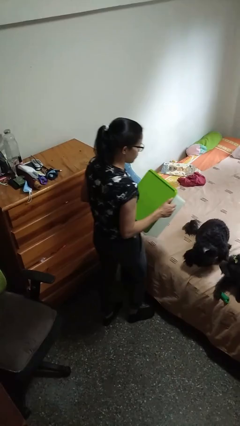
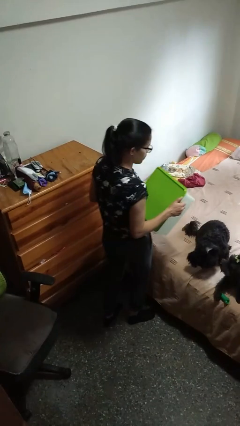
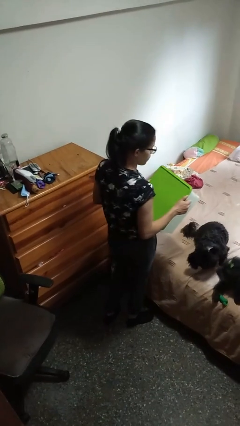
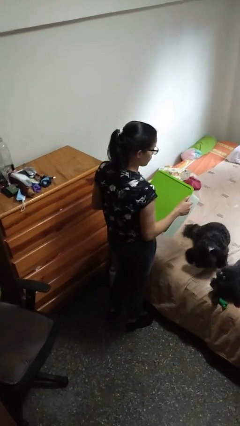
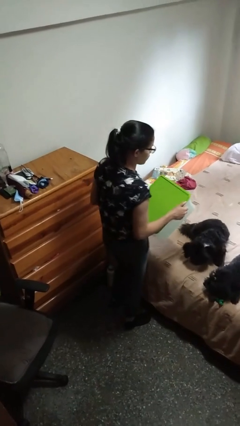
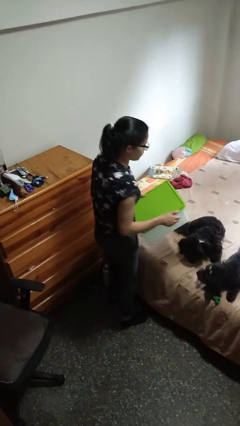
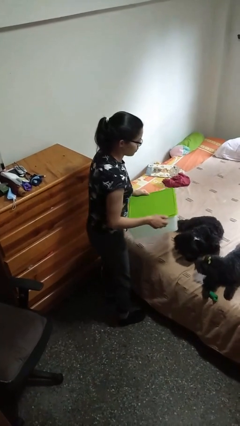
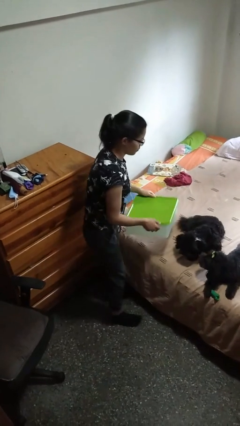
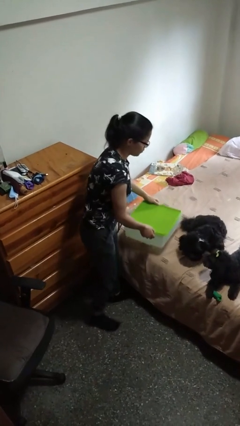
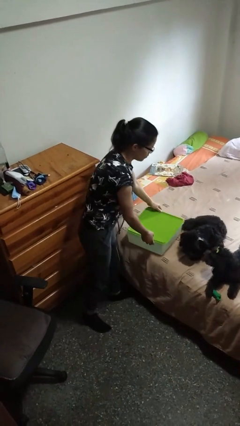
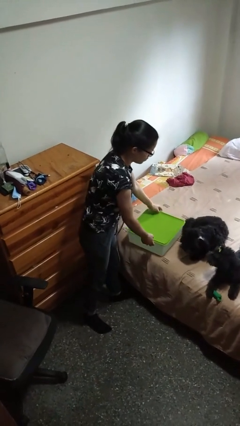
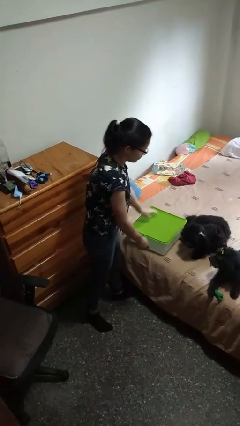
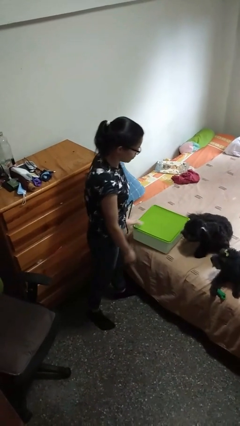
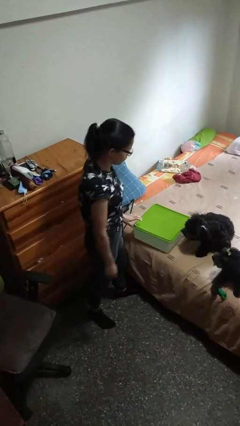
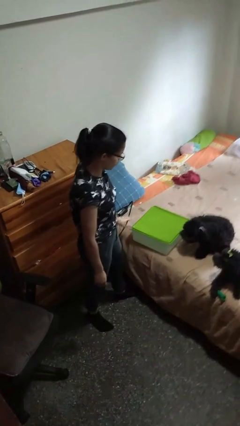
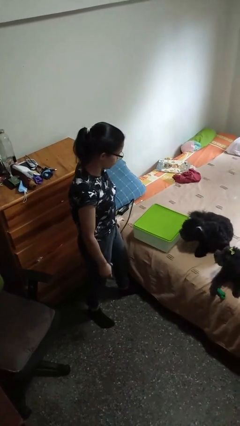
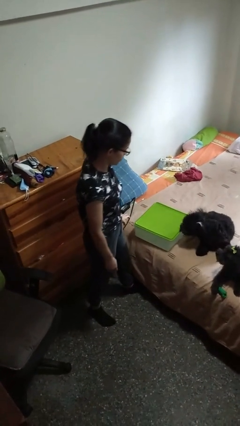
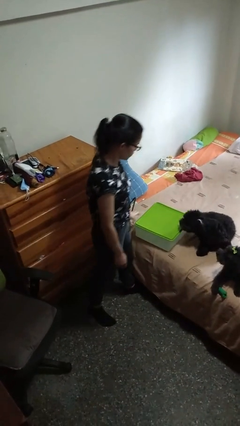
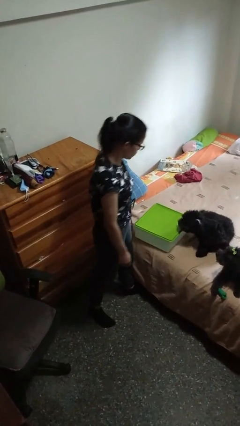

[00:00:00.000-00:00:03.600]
person puts down object on bed

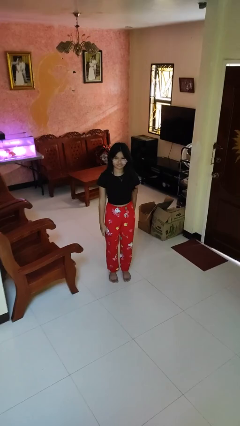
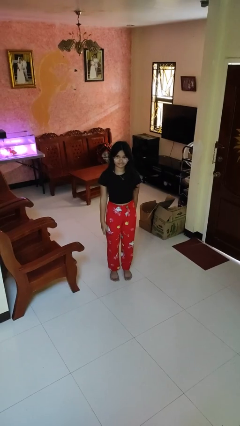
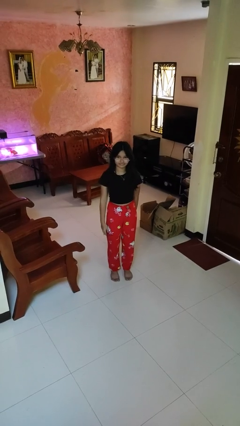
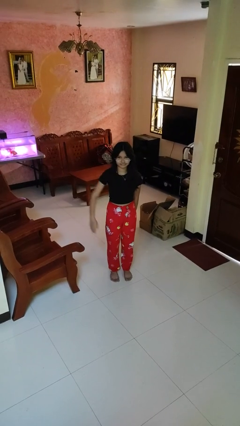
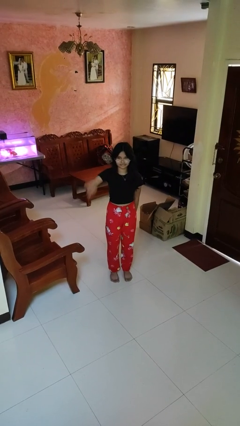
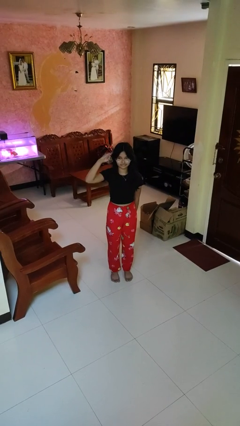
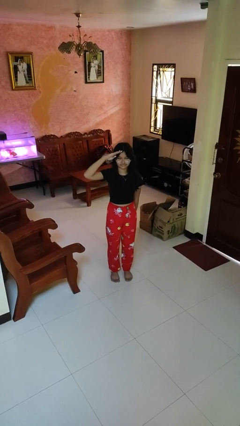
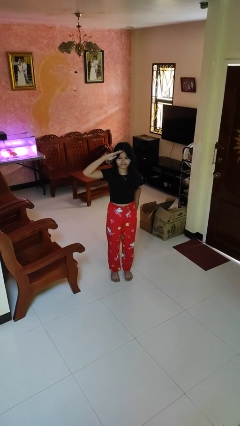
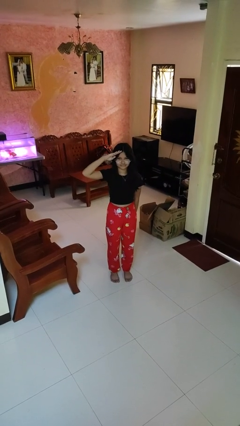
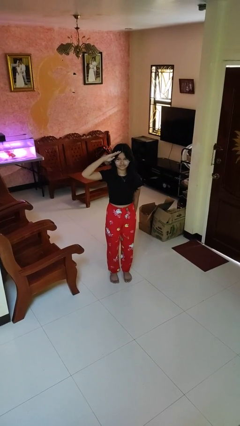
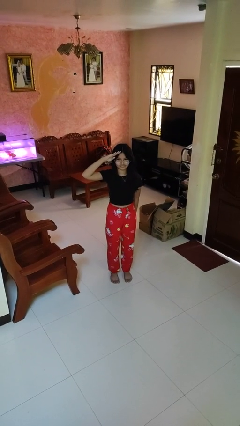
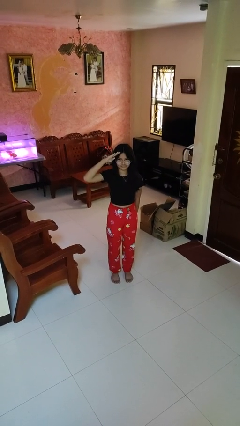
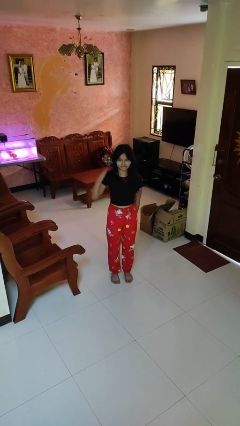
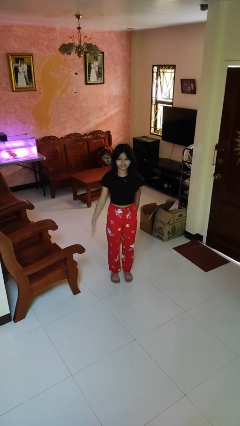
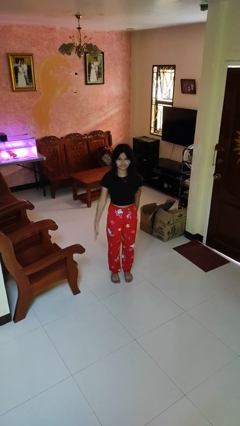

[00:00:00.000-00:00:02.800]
person salutes

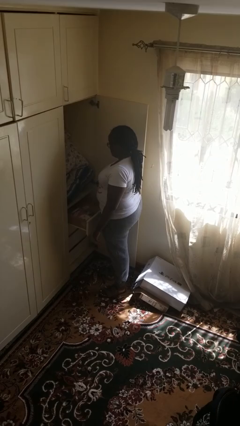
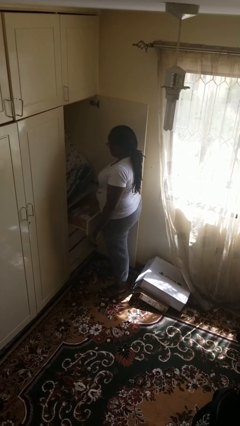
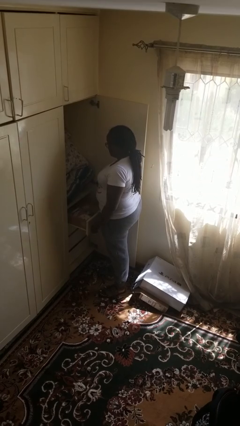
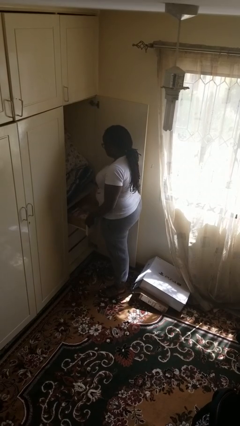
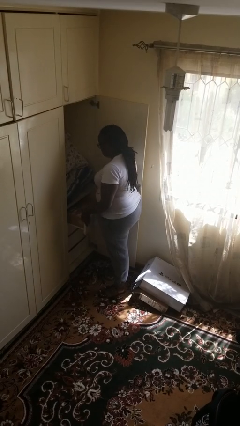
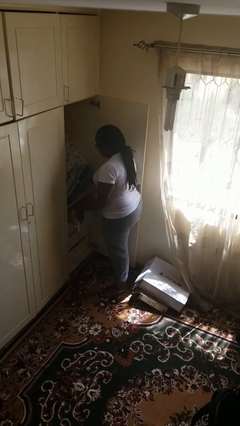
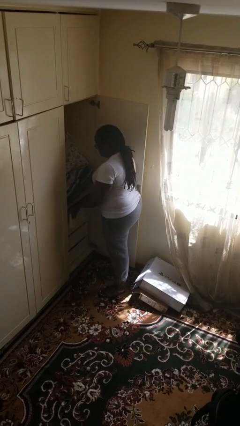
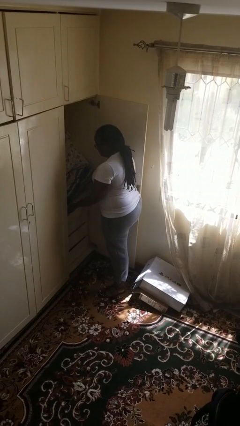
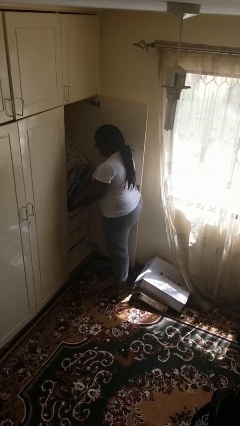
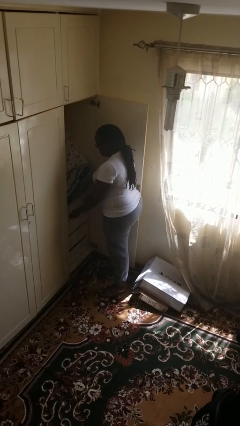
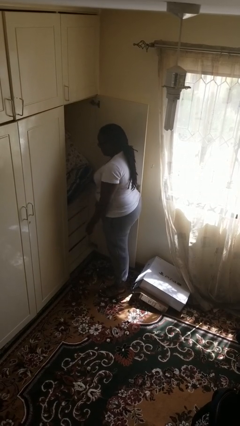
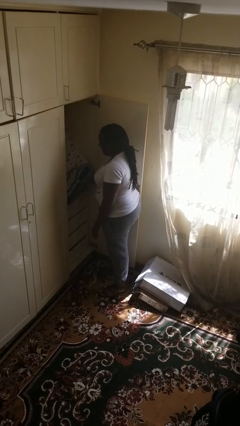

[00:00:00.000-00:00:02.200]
person closes dresser drawer

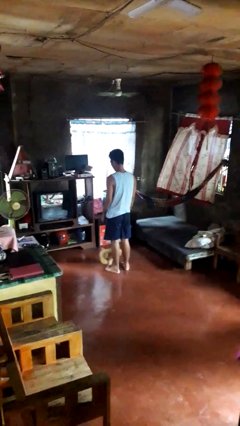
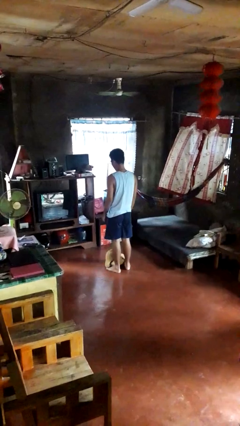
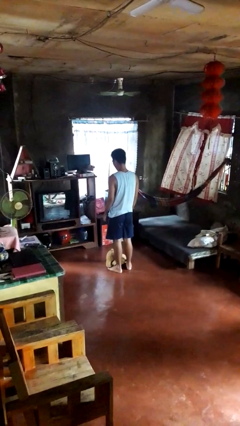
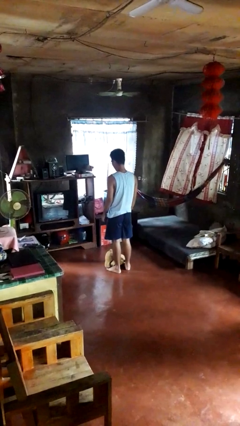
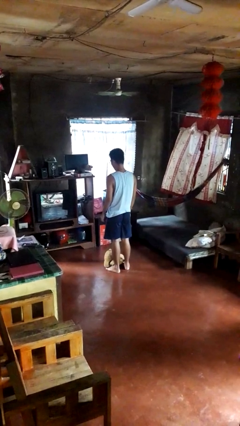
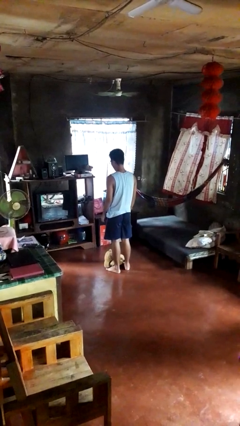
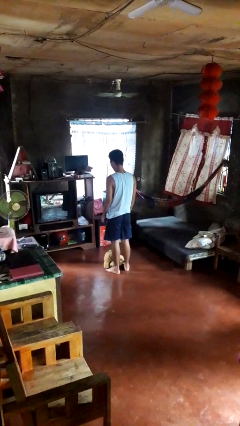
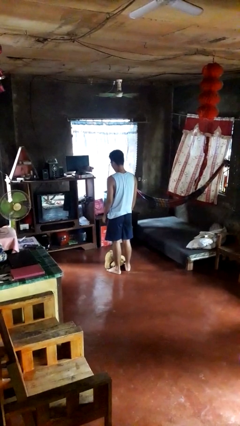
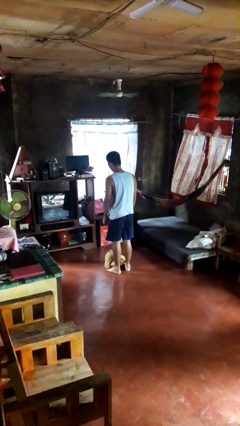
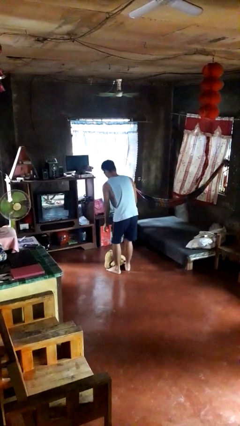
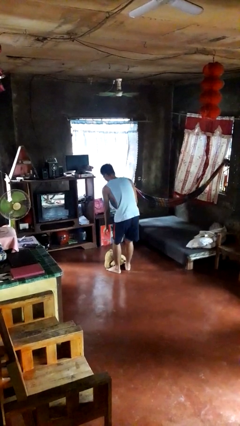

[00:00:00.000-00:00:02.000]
person drops object

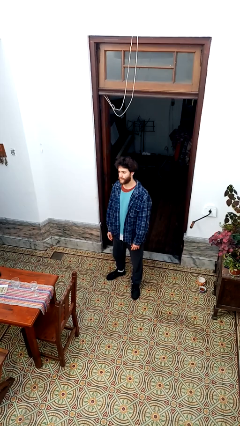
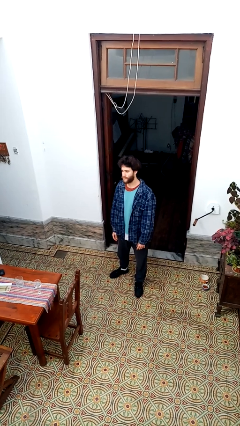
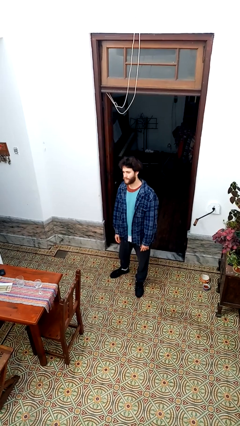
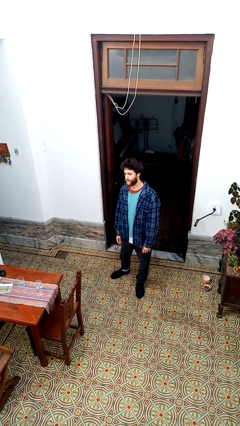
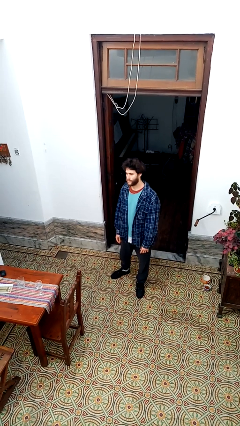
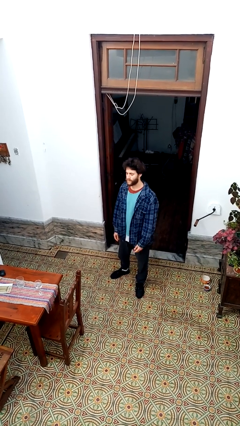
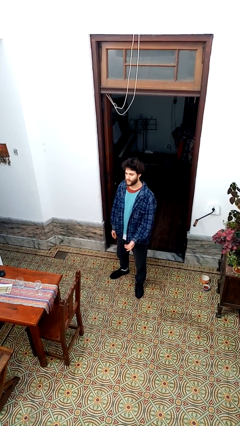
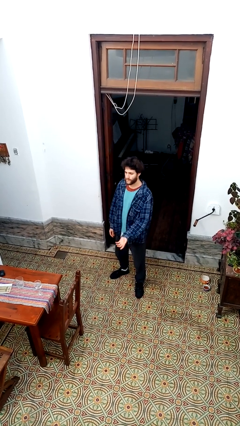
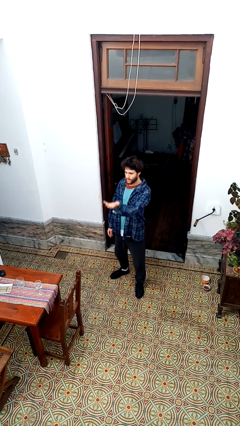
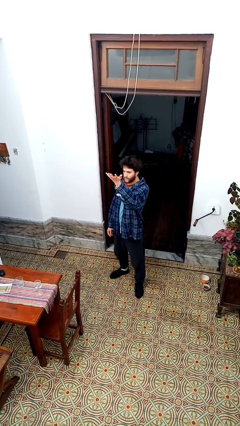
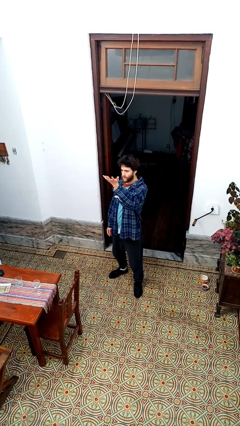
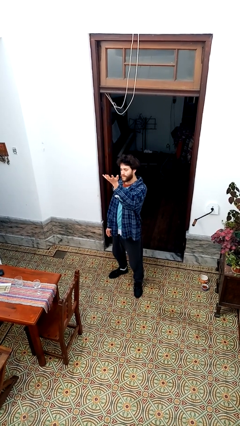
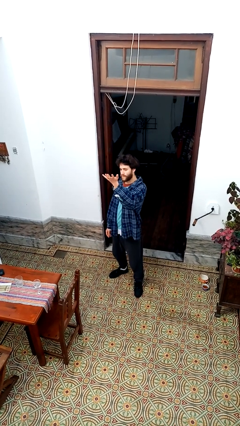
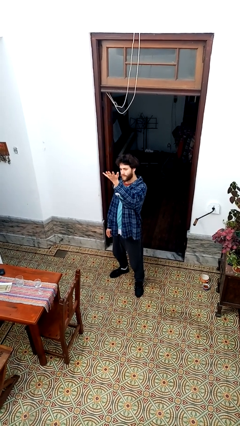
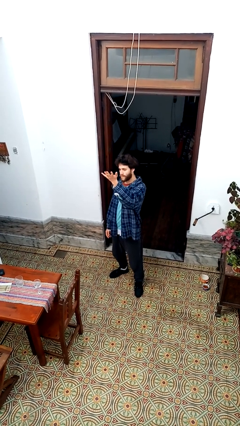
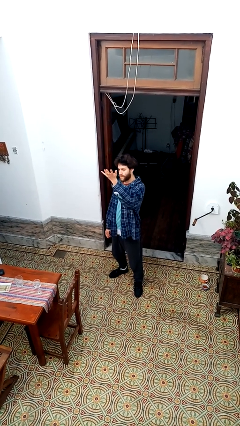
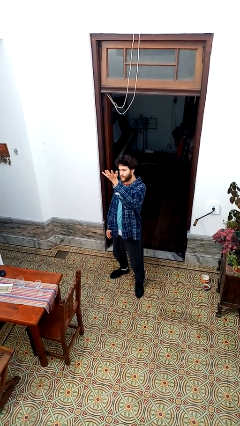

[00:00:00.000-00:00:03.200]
person gestures swipe up

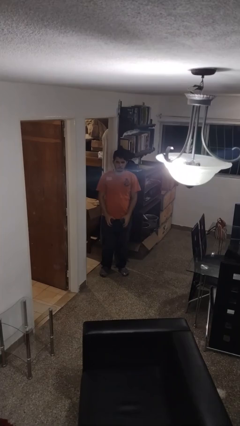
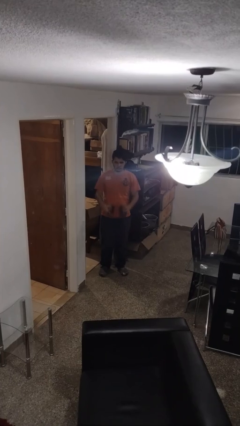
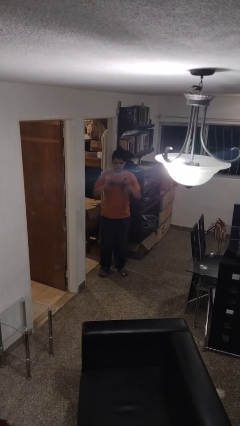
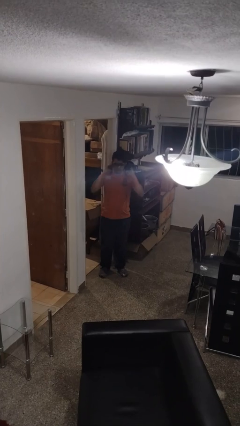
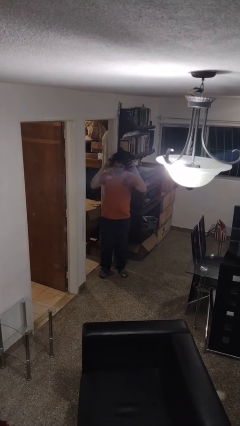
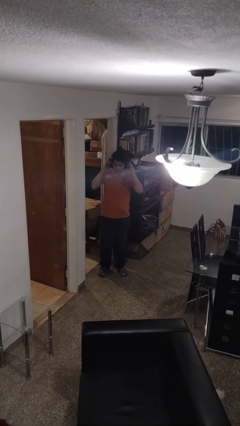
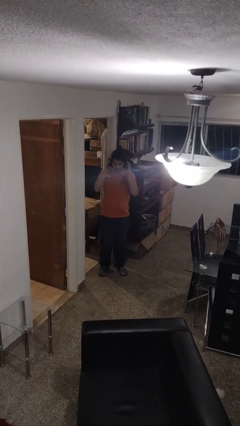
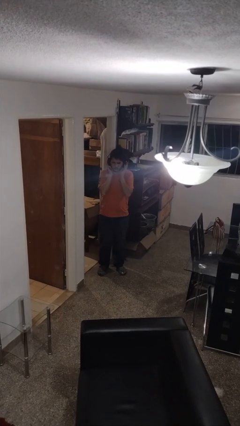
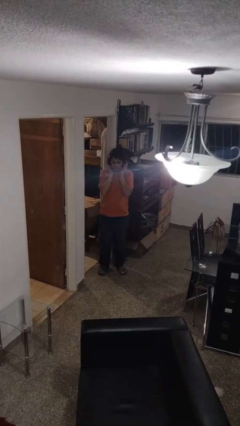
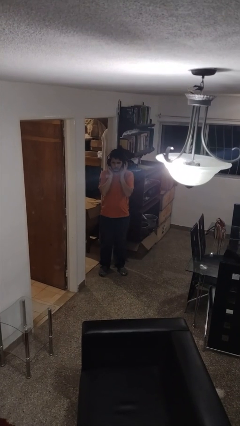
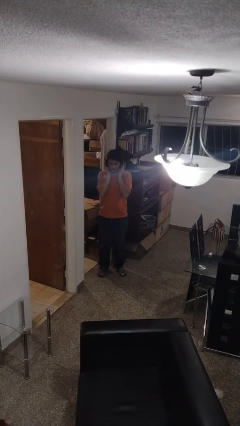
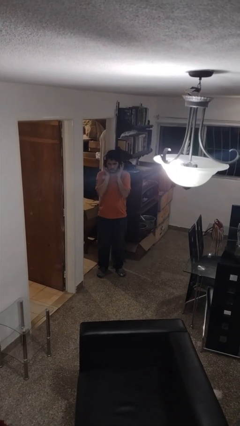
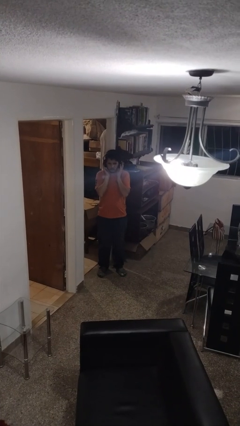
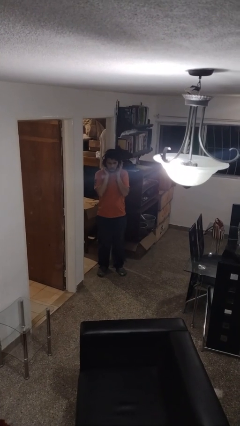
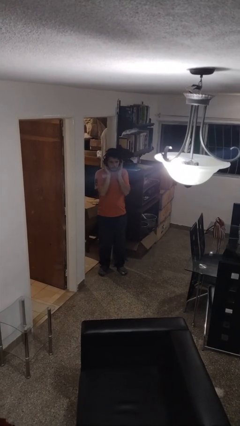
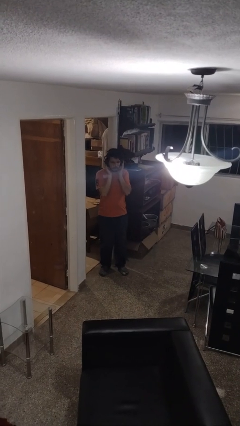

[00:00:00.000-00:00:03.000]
person puts on headphones

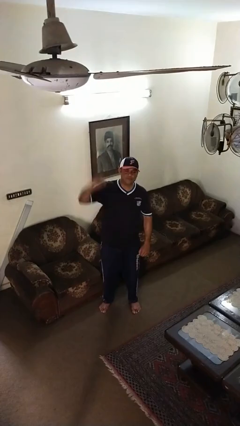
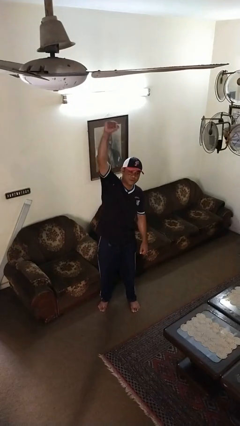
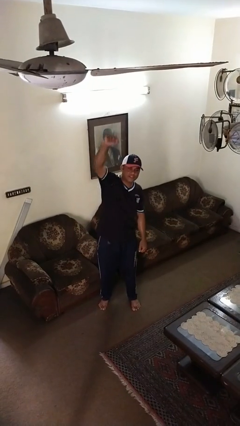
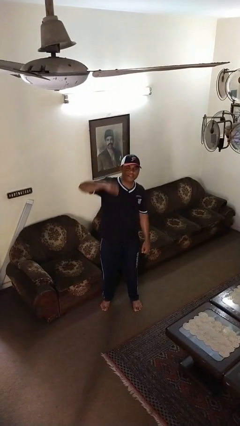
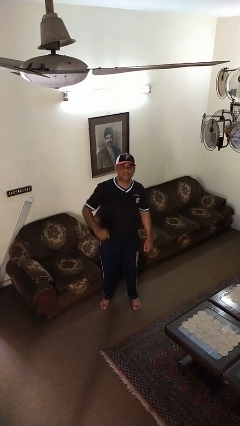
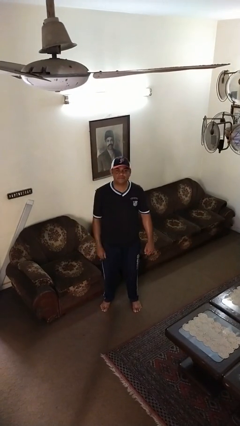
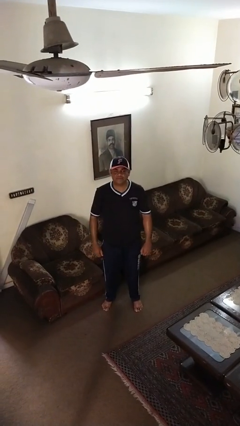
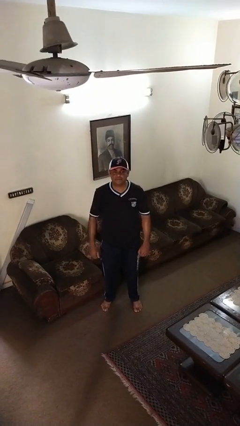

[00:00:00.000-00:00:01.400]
person punches
